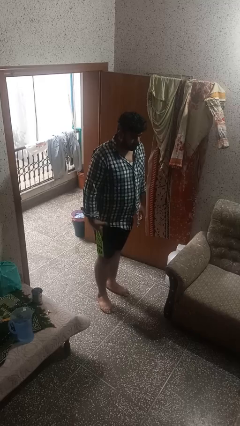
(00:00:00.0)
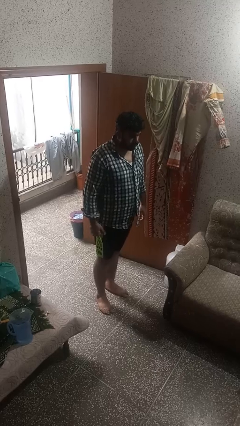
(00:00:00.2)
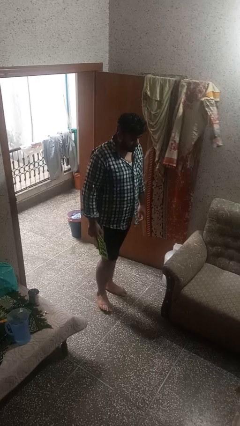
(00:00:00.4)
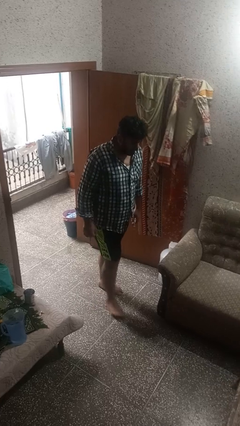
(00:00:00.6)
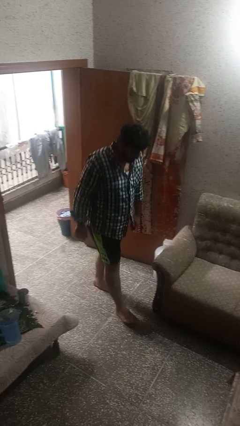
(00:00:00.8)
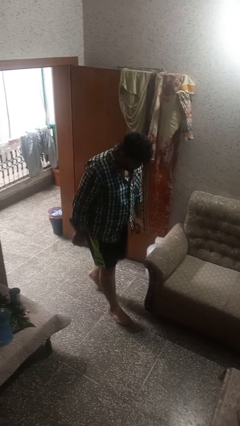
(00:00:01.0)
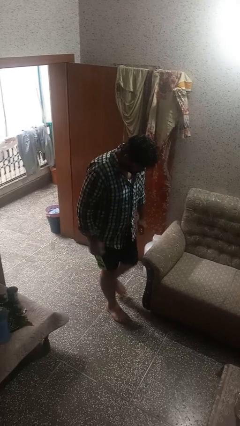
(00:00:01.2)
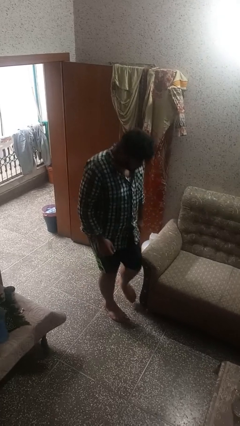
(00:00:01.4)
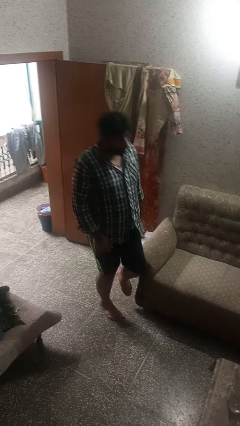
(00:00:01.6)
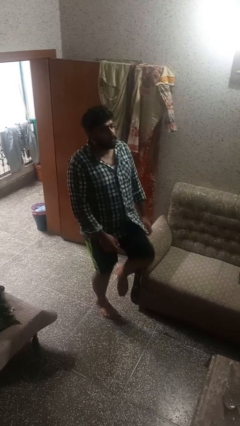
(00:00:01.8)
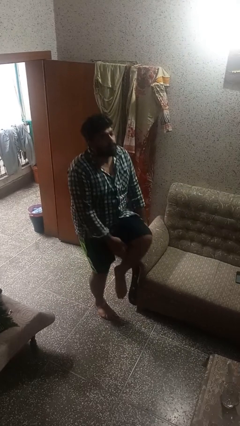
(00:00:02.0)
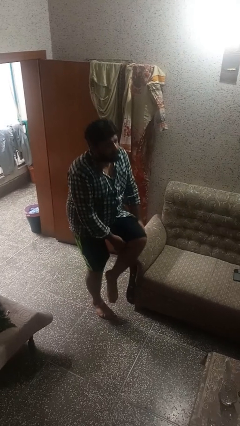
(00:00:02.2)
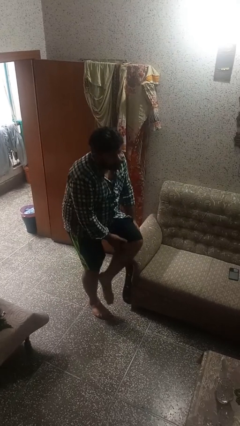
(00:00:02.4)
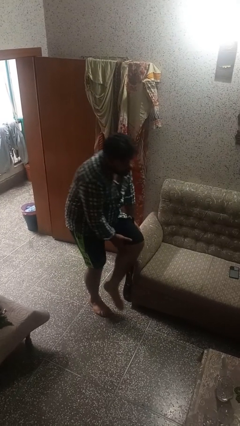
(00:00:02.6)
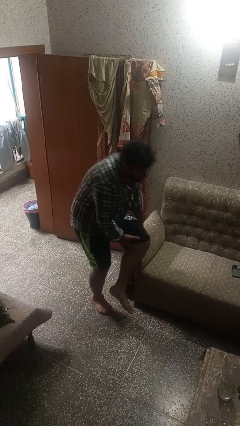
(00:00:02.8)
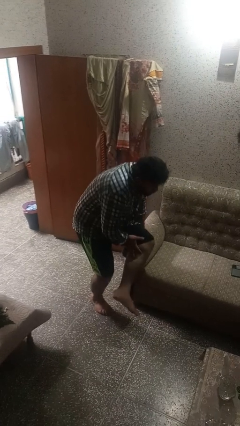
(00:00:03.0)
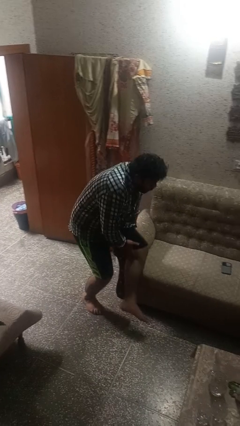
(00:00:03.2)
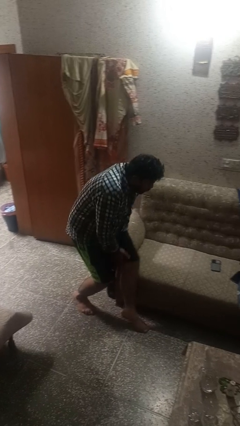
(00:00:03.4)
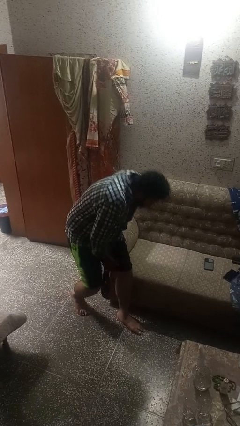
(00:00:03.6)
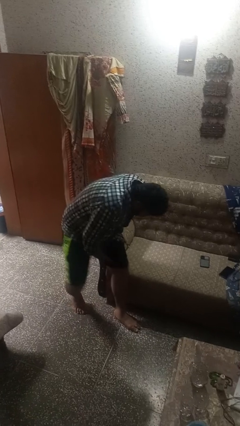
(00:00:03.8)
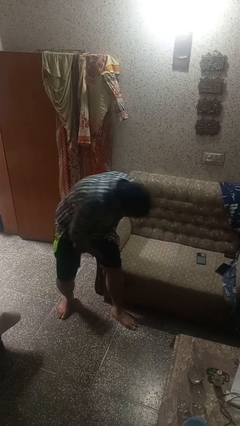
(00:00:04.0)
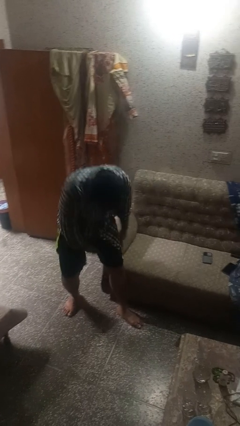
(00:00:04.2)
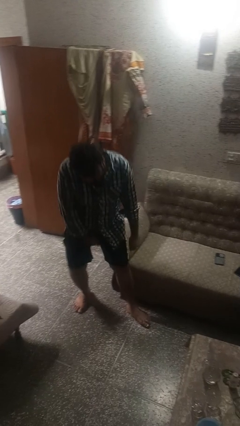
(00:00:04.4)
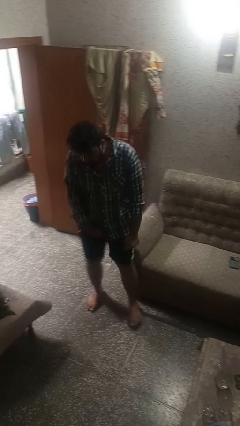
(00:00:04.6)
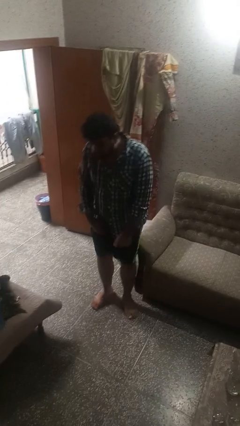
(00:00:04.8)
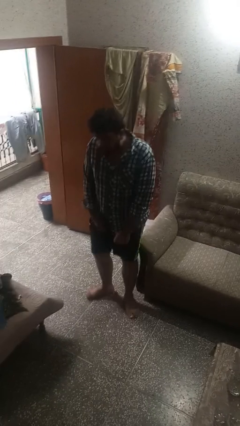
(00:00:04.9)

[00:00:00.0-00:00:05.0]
person stubs toe

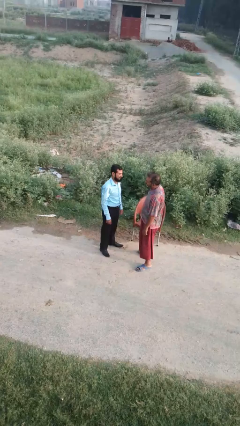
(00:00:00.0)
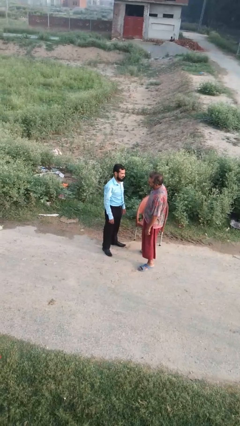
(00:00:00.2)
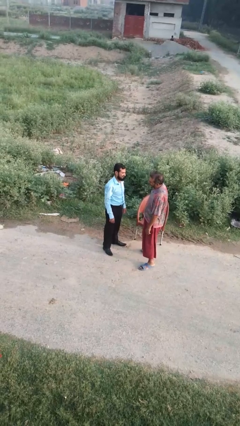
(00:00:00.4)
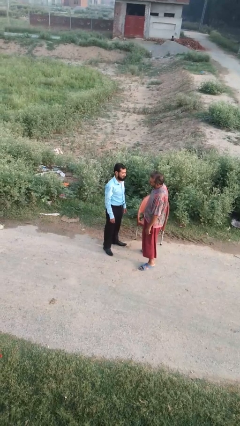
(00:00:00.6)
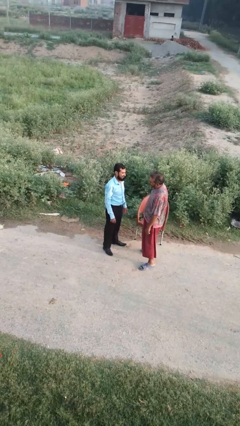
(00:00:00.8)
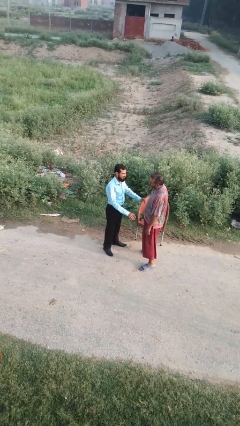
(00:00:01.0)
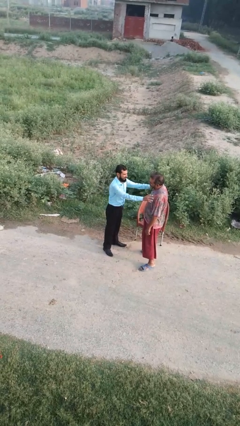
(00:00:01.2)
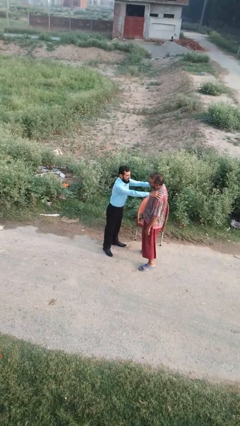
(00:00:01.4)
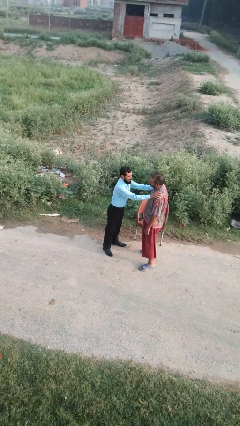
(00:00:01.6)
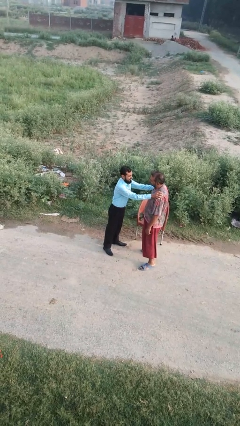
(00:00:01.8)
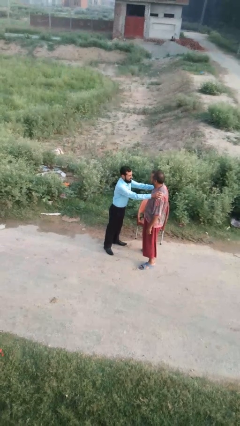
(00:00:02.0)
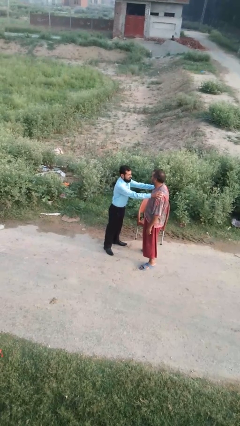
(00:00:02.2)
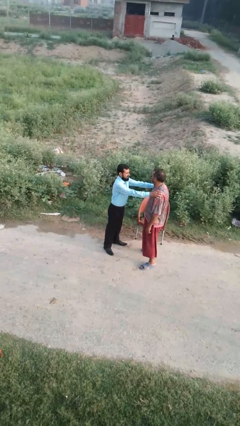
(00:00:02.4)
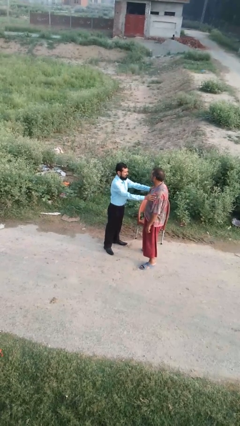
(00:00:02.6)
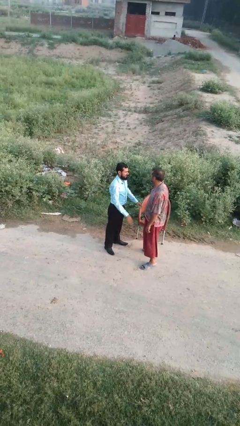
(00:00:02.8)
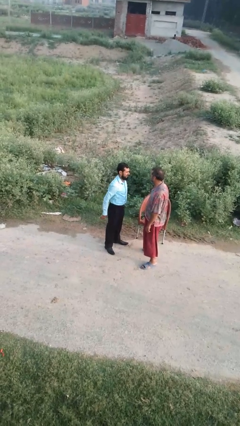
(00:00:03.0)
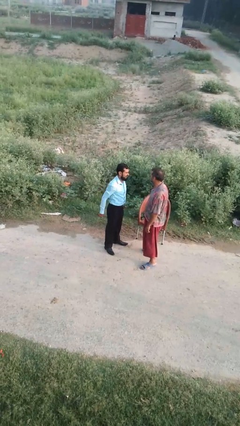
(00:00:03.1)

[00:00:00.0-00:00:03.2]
person pounds shoulders of person

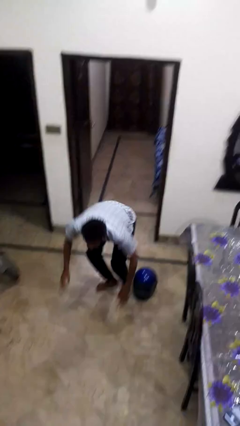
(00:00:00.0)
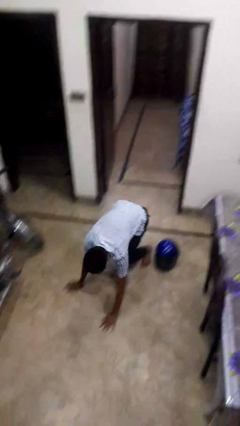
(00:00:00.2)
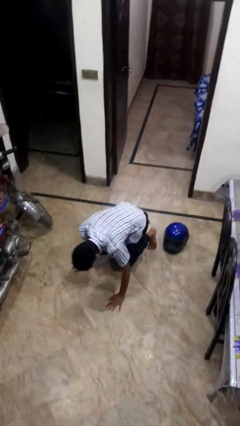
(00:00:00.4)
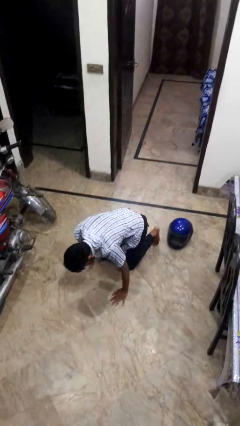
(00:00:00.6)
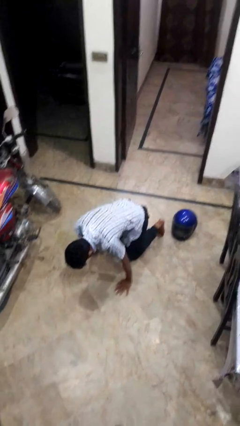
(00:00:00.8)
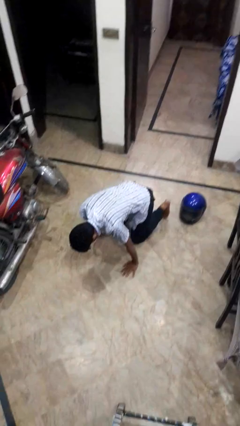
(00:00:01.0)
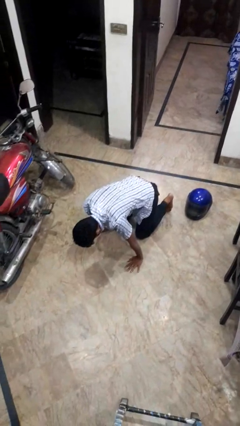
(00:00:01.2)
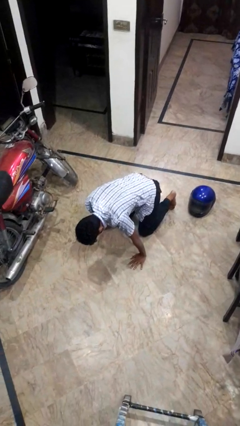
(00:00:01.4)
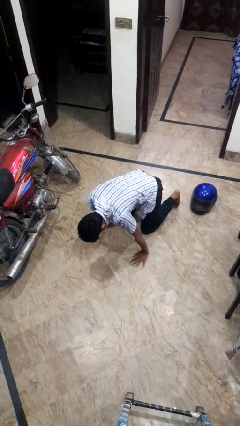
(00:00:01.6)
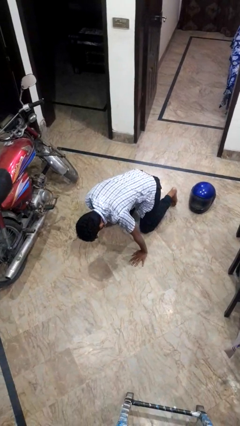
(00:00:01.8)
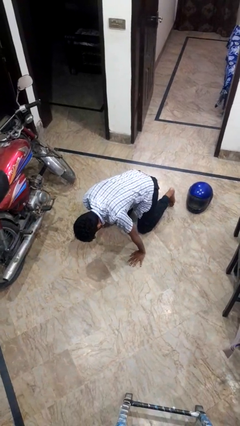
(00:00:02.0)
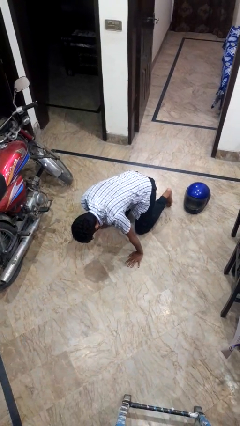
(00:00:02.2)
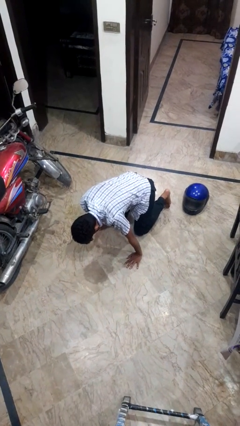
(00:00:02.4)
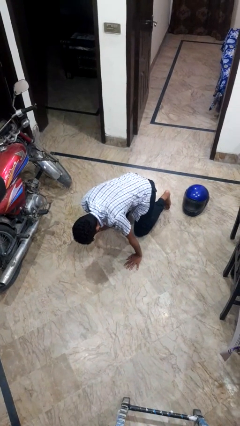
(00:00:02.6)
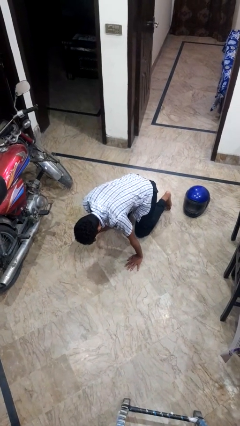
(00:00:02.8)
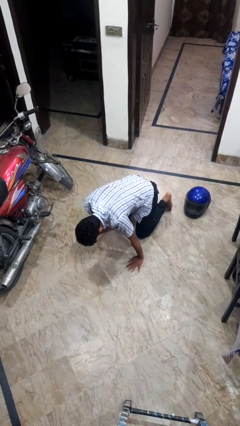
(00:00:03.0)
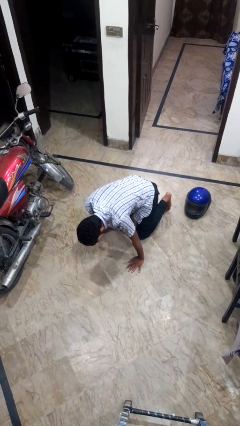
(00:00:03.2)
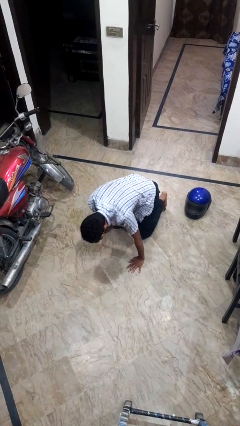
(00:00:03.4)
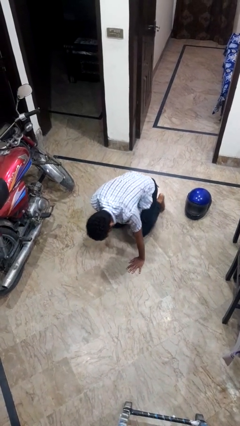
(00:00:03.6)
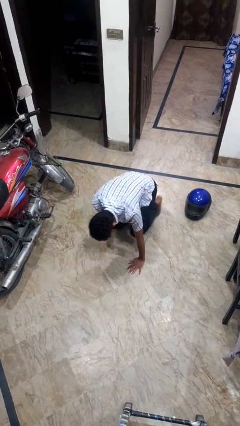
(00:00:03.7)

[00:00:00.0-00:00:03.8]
person trips on object on floor

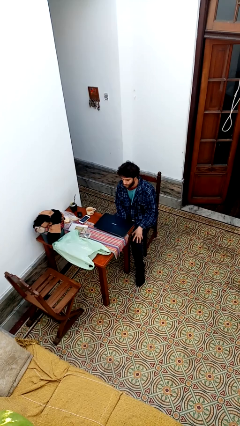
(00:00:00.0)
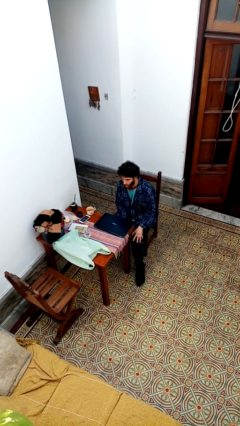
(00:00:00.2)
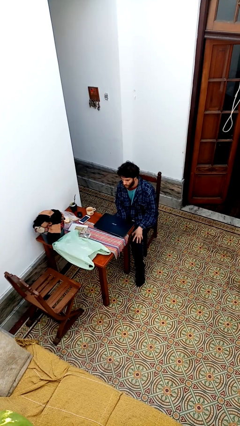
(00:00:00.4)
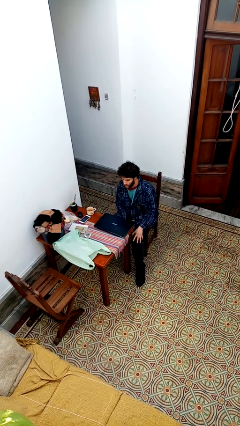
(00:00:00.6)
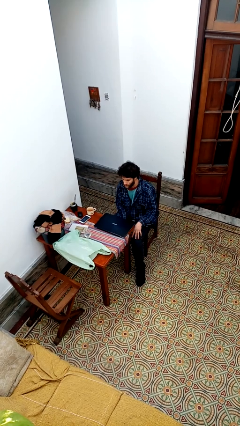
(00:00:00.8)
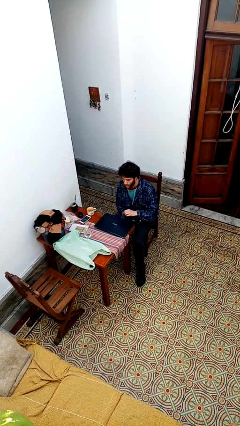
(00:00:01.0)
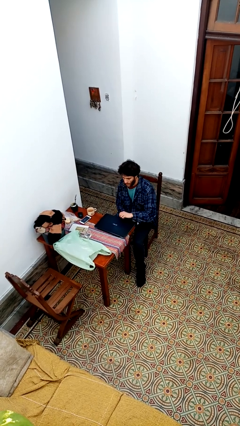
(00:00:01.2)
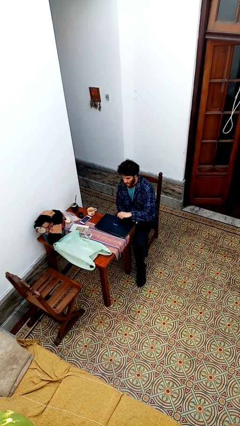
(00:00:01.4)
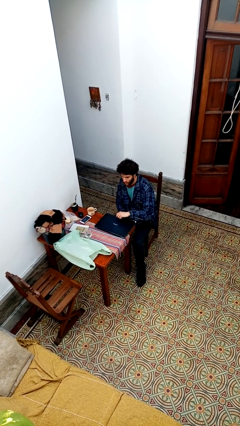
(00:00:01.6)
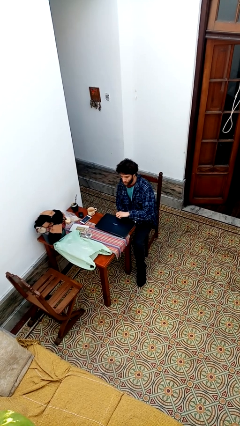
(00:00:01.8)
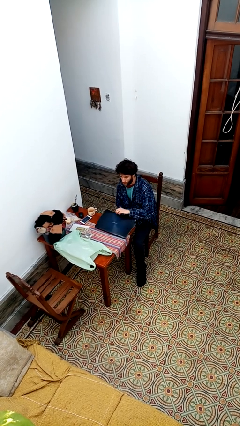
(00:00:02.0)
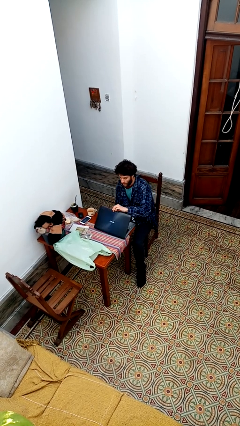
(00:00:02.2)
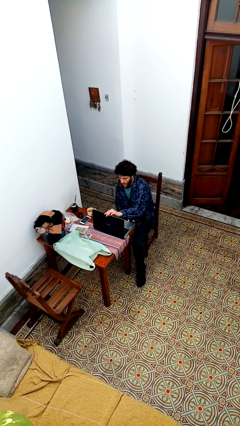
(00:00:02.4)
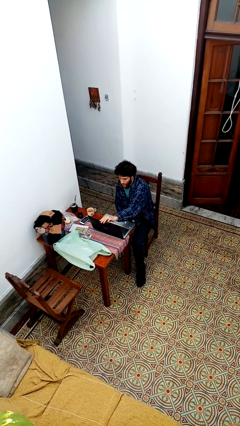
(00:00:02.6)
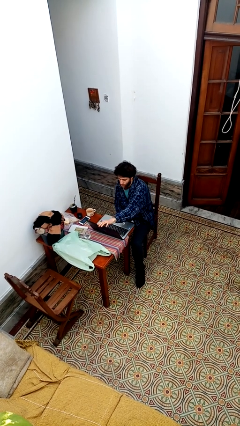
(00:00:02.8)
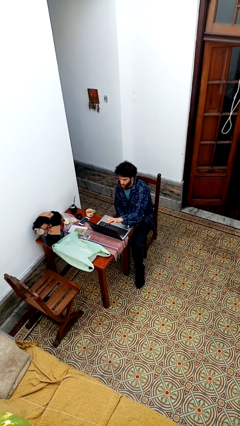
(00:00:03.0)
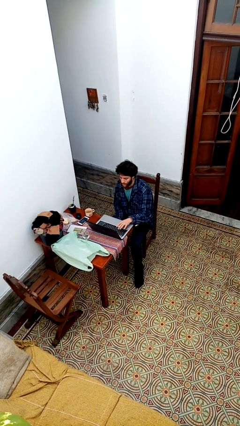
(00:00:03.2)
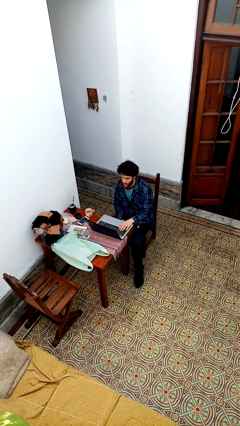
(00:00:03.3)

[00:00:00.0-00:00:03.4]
person opens laptop

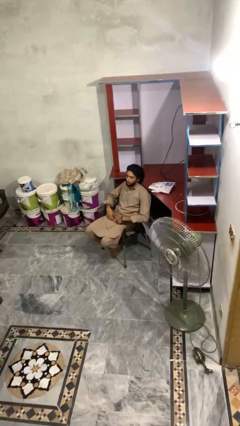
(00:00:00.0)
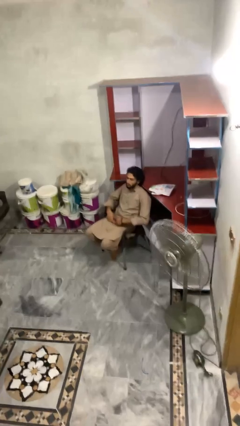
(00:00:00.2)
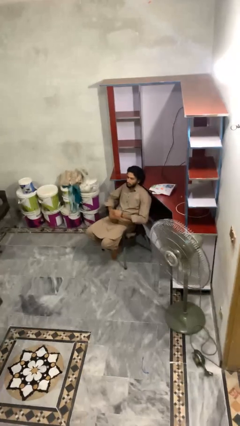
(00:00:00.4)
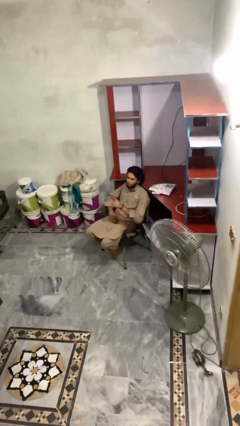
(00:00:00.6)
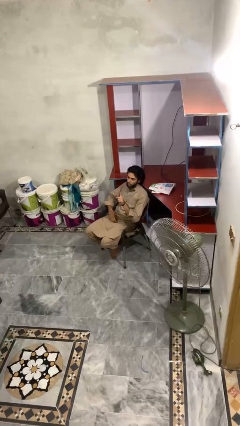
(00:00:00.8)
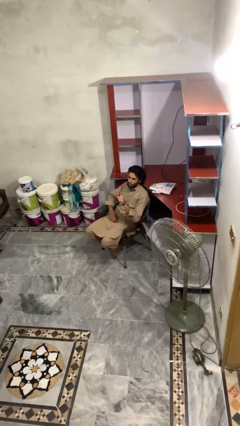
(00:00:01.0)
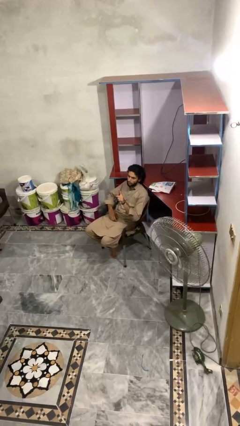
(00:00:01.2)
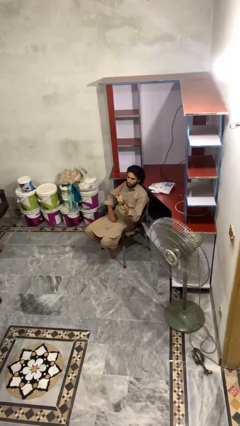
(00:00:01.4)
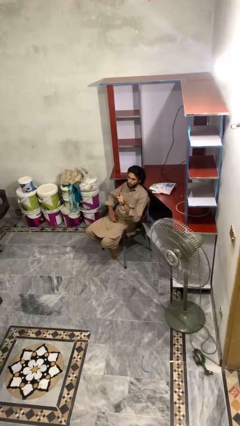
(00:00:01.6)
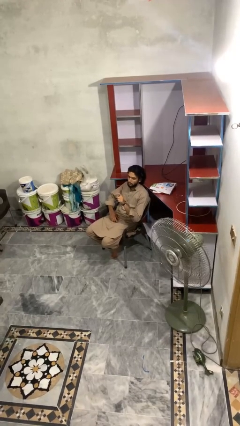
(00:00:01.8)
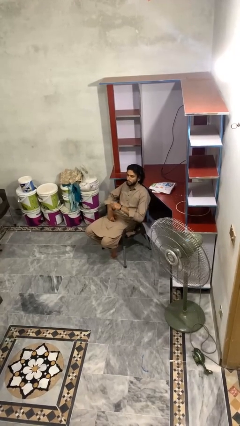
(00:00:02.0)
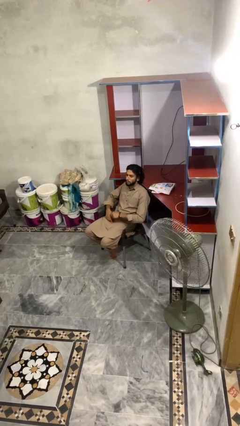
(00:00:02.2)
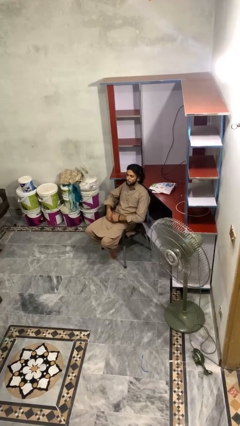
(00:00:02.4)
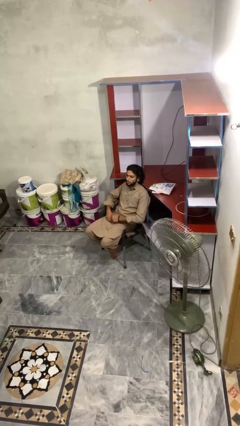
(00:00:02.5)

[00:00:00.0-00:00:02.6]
person gestures number one
